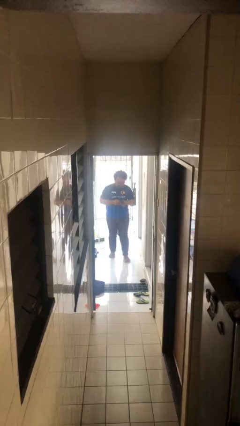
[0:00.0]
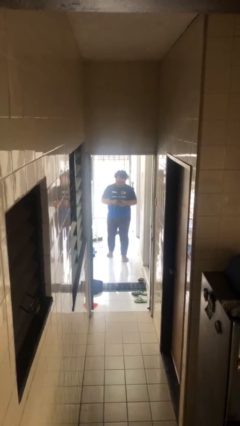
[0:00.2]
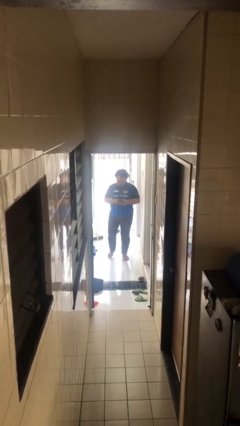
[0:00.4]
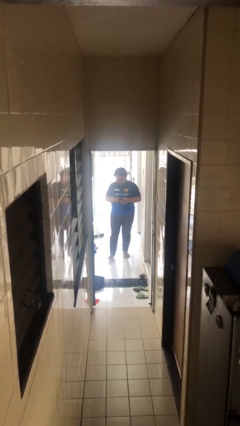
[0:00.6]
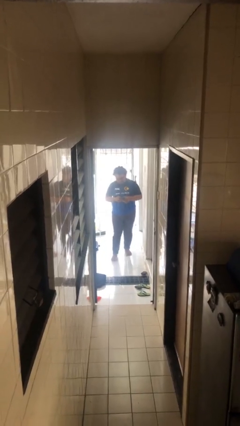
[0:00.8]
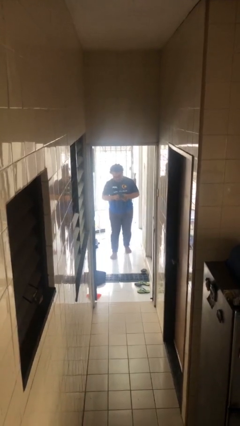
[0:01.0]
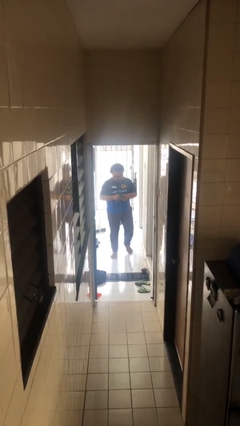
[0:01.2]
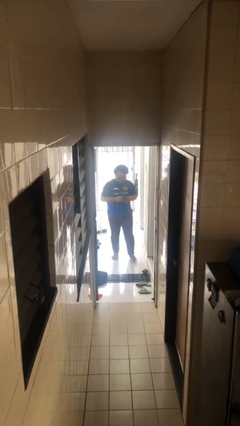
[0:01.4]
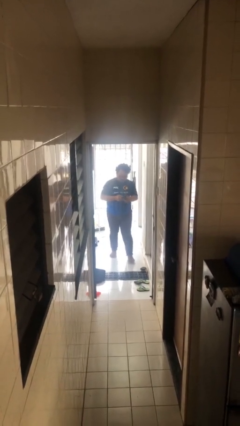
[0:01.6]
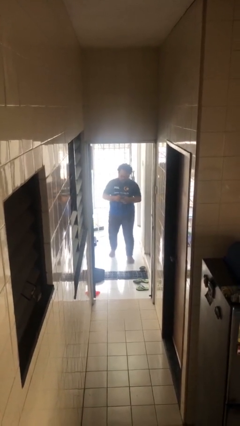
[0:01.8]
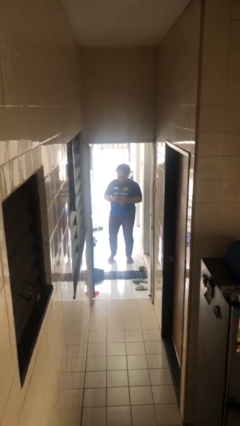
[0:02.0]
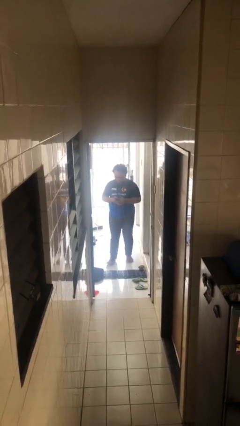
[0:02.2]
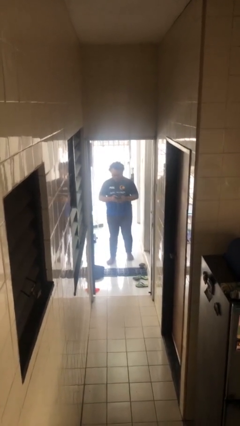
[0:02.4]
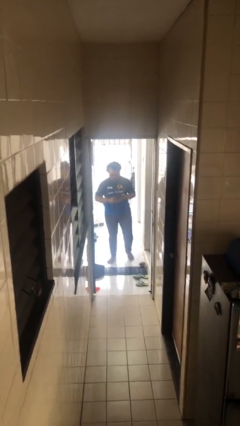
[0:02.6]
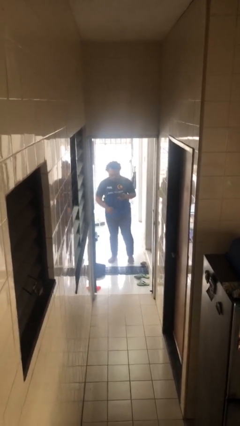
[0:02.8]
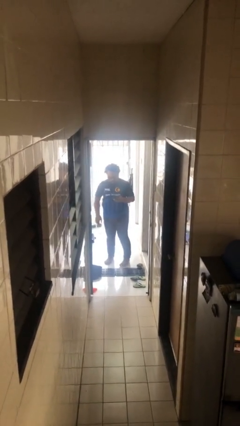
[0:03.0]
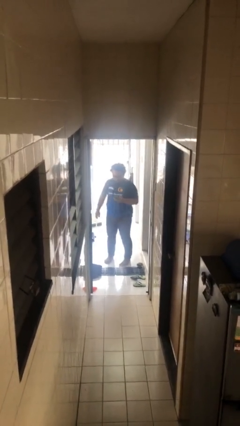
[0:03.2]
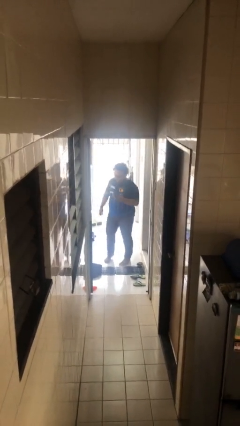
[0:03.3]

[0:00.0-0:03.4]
person texts on phone

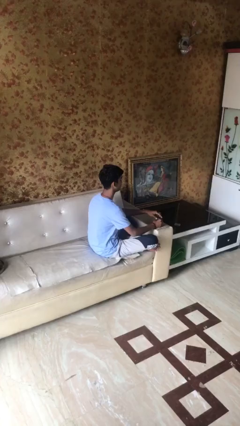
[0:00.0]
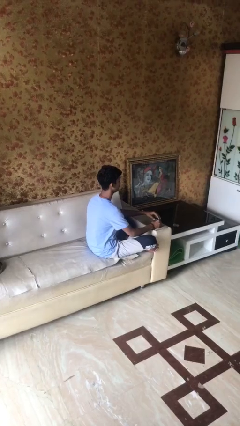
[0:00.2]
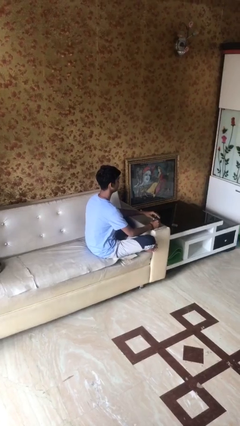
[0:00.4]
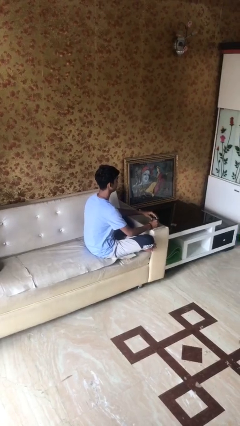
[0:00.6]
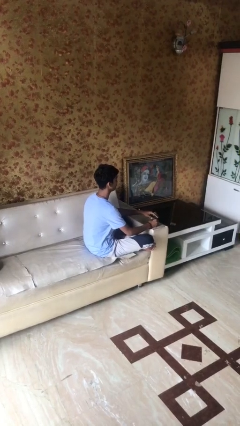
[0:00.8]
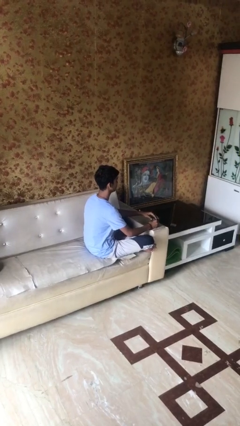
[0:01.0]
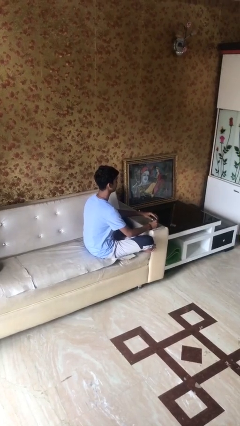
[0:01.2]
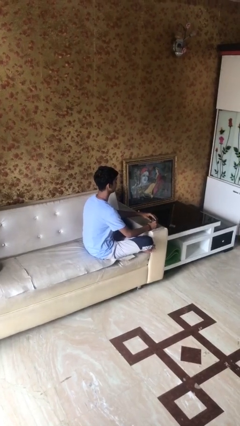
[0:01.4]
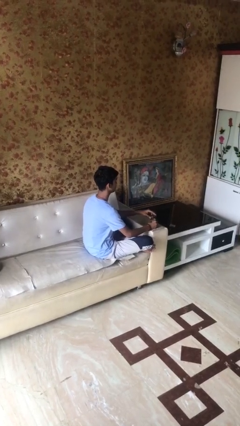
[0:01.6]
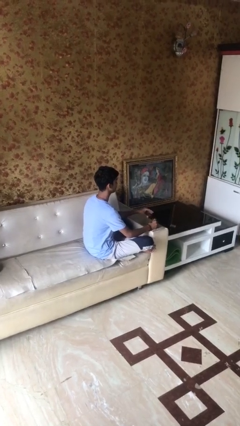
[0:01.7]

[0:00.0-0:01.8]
person opens jar

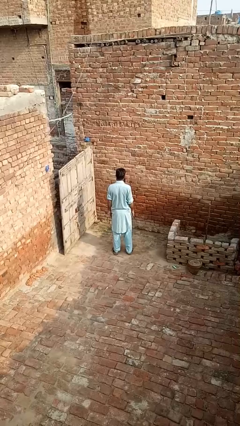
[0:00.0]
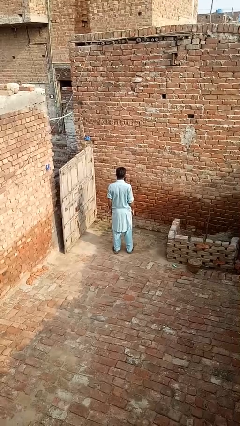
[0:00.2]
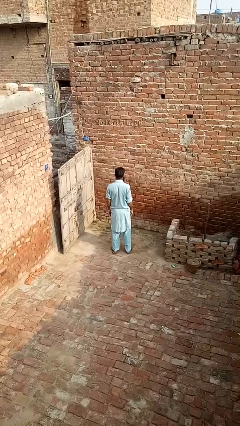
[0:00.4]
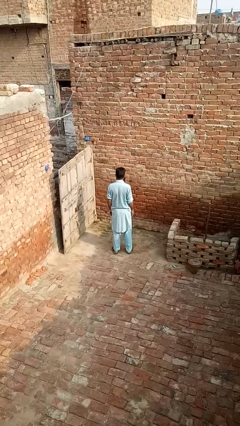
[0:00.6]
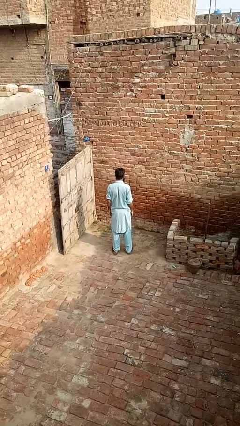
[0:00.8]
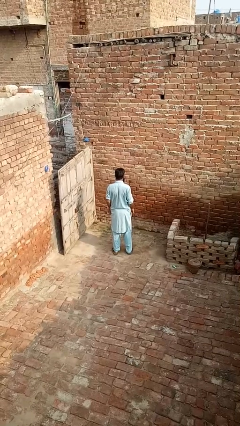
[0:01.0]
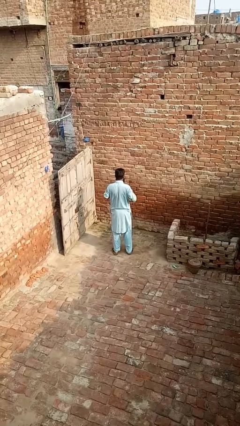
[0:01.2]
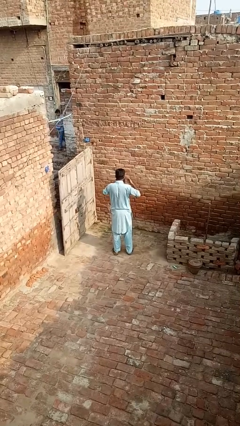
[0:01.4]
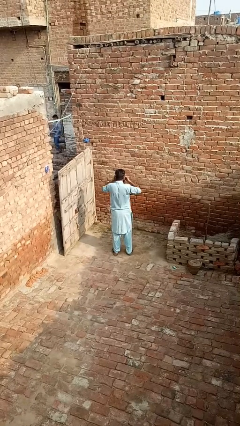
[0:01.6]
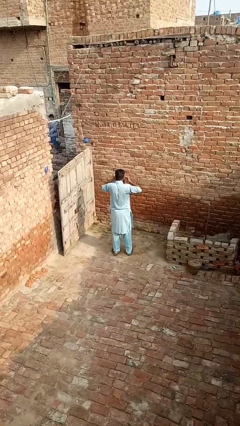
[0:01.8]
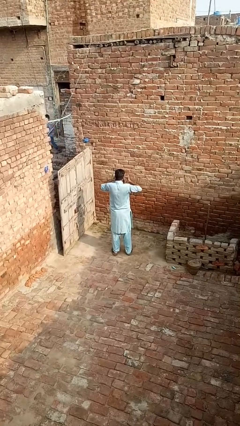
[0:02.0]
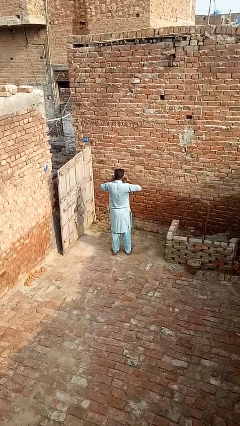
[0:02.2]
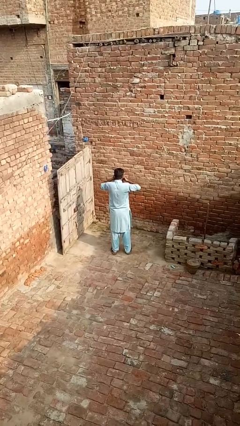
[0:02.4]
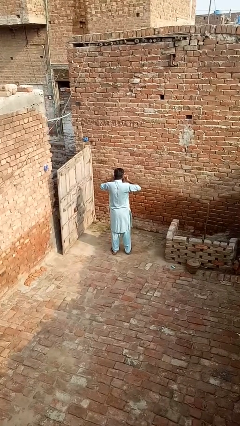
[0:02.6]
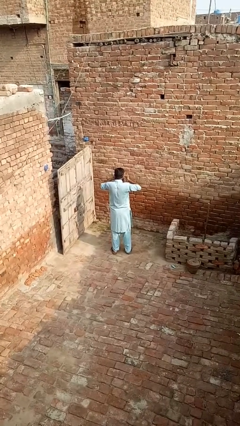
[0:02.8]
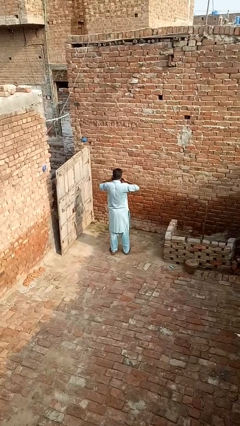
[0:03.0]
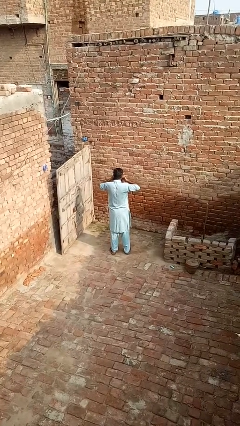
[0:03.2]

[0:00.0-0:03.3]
person rubs eyes

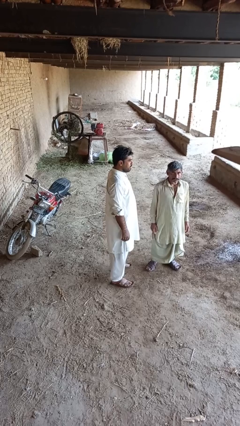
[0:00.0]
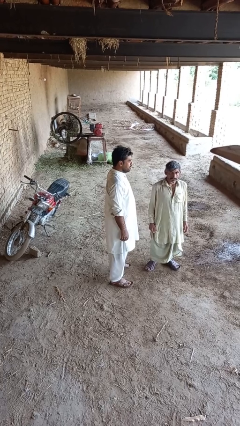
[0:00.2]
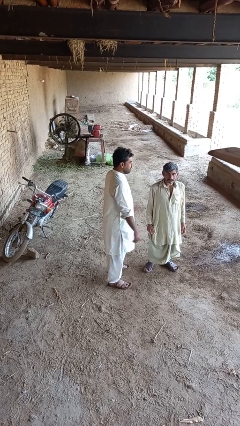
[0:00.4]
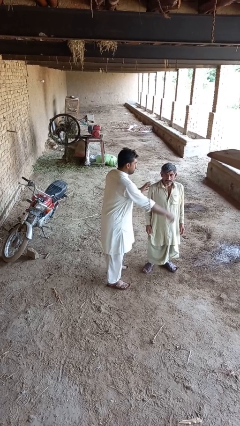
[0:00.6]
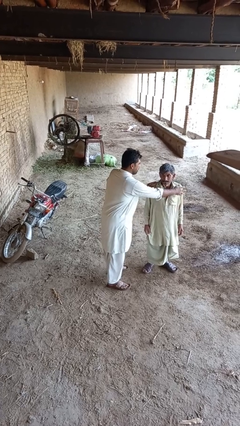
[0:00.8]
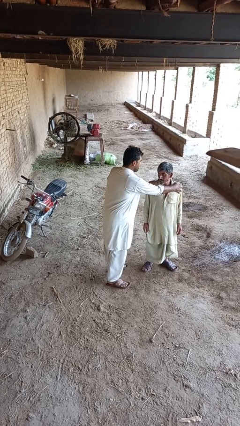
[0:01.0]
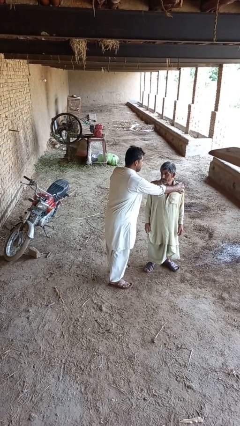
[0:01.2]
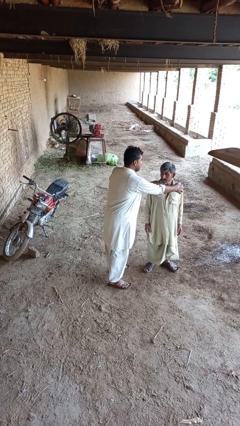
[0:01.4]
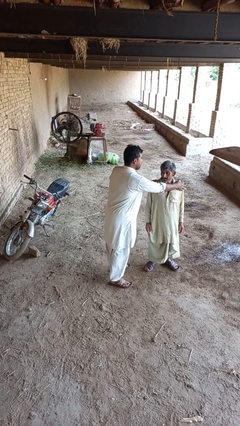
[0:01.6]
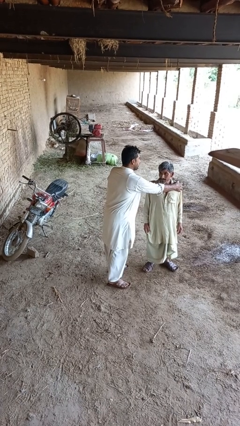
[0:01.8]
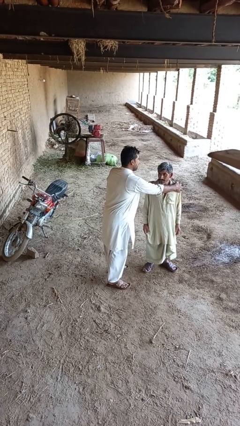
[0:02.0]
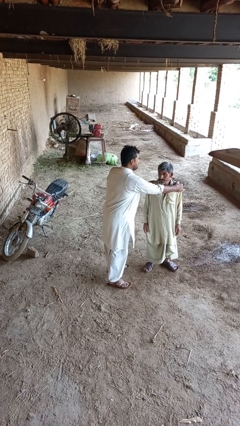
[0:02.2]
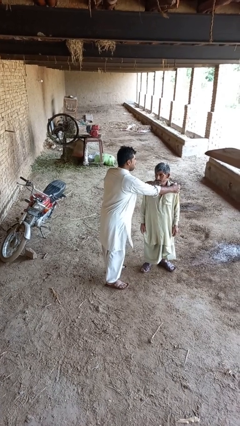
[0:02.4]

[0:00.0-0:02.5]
person grabs person by shoulder

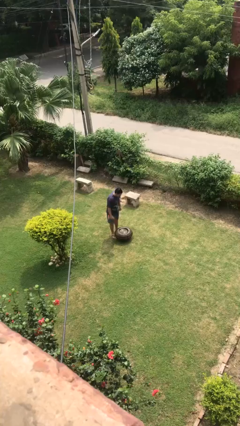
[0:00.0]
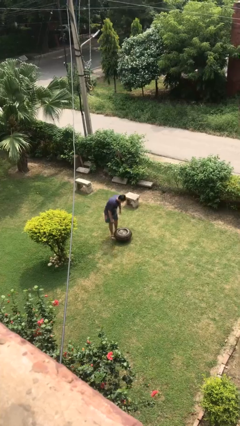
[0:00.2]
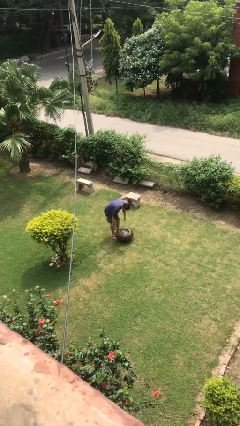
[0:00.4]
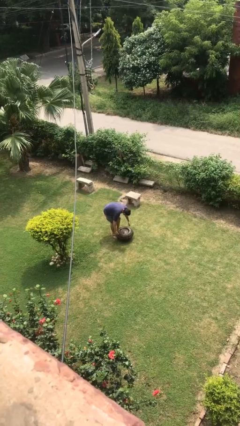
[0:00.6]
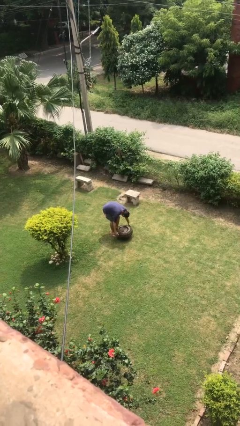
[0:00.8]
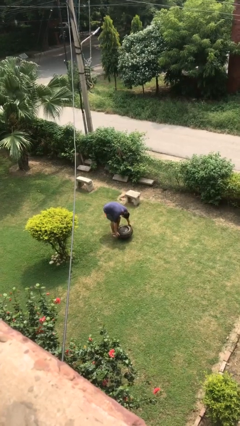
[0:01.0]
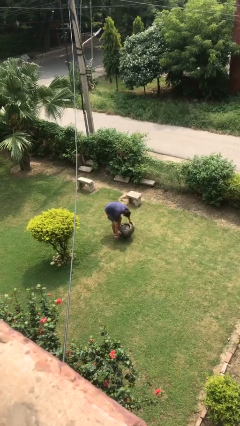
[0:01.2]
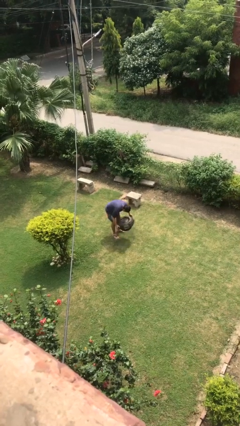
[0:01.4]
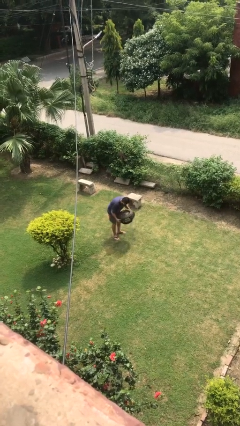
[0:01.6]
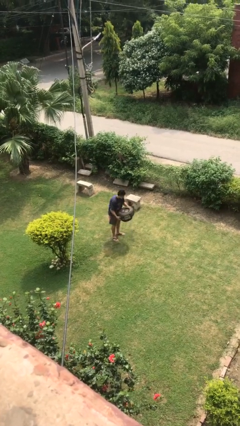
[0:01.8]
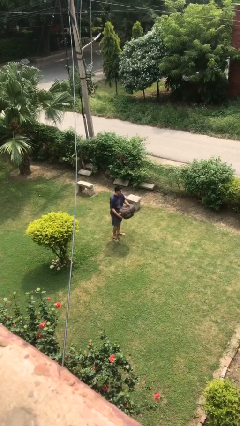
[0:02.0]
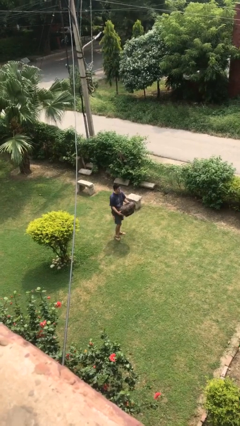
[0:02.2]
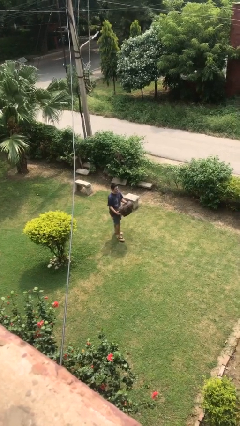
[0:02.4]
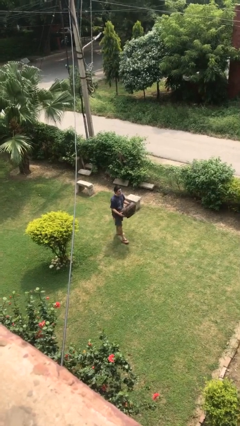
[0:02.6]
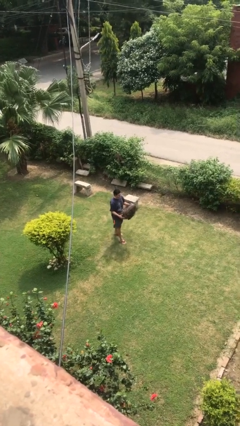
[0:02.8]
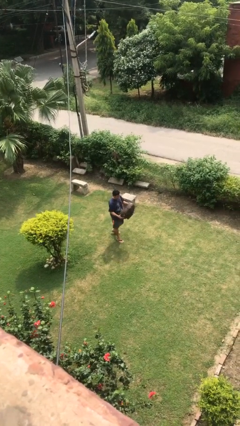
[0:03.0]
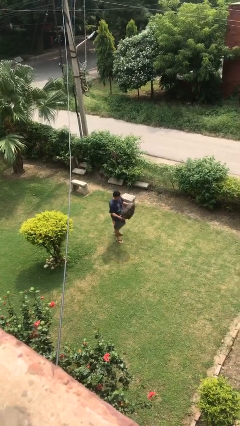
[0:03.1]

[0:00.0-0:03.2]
person picks up object from floor

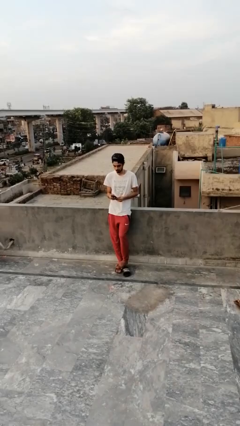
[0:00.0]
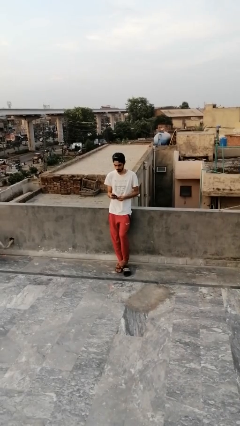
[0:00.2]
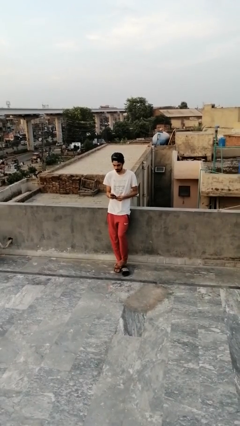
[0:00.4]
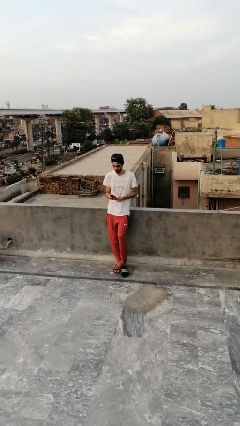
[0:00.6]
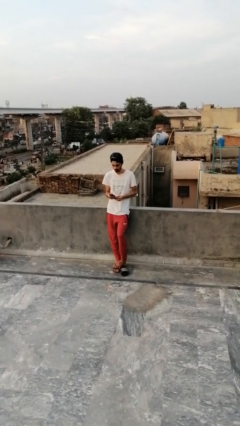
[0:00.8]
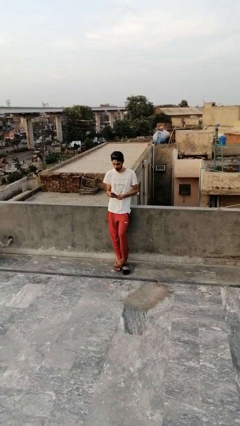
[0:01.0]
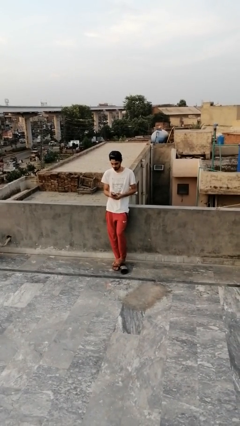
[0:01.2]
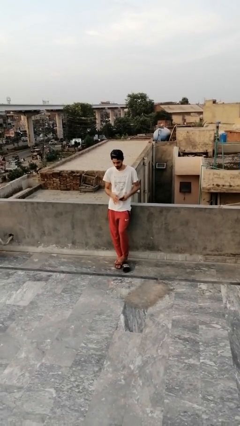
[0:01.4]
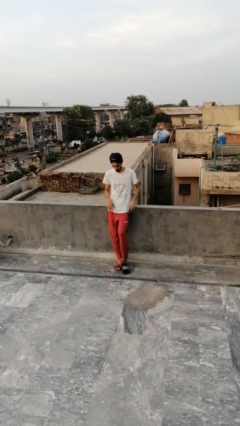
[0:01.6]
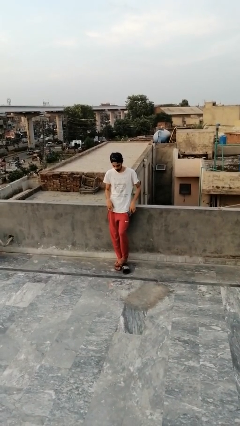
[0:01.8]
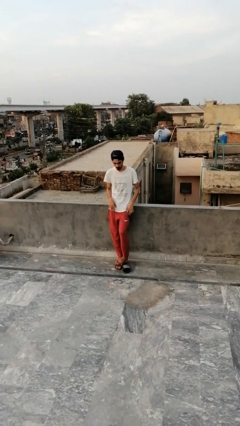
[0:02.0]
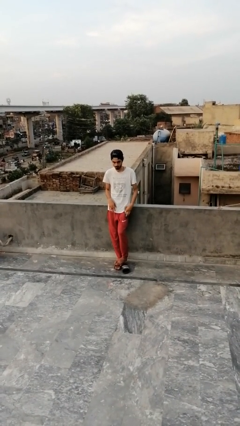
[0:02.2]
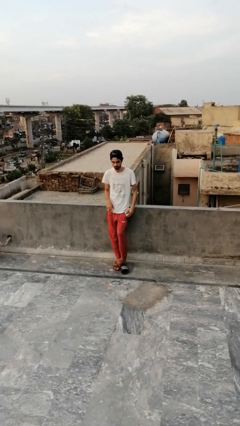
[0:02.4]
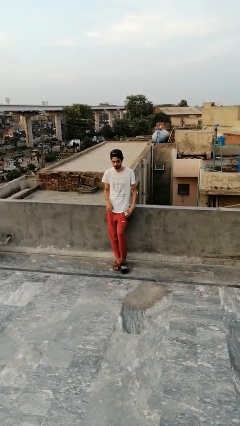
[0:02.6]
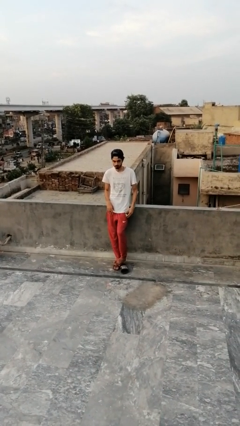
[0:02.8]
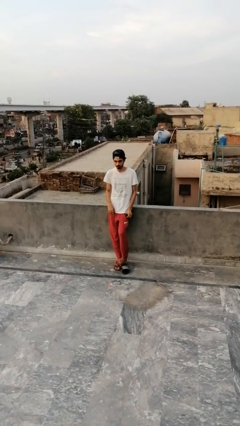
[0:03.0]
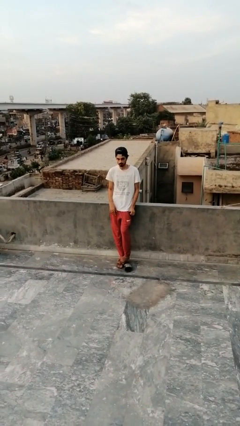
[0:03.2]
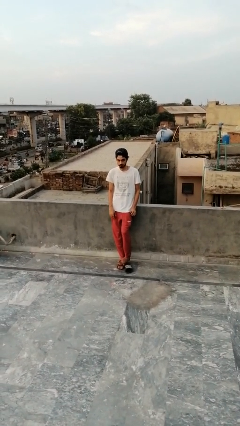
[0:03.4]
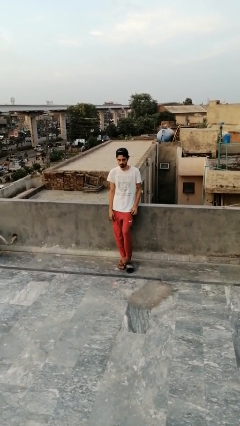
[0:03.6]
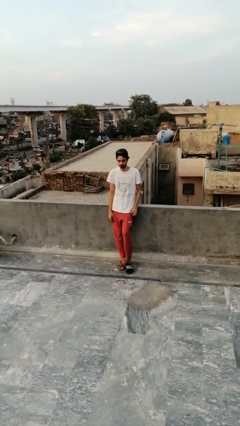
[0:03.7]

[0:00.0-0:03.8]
person puts phone into pocket
